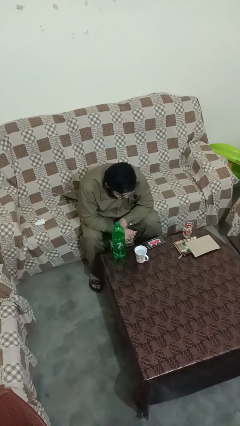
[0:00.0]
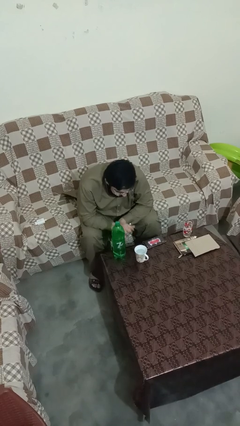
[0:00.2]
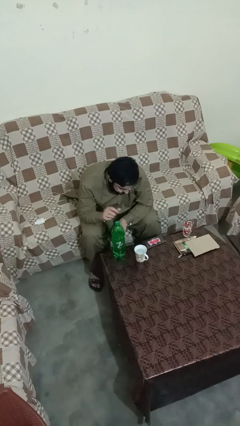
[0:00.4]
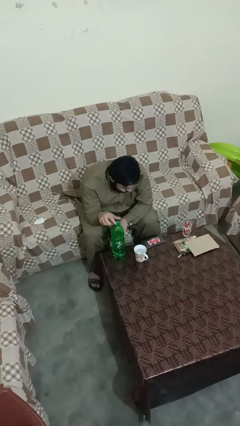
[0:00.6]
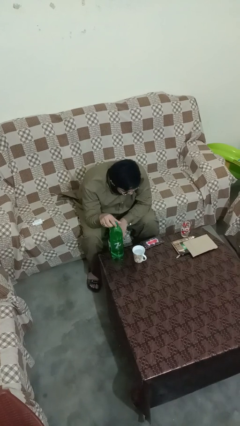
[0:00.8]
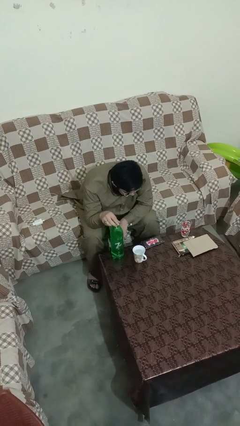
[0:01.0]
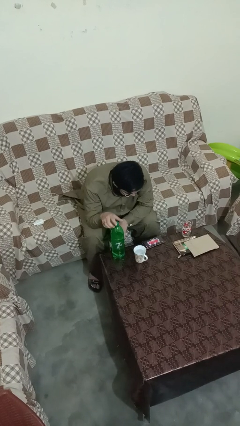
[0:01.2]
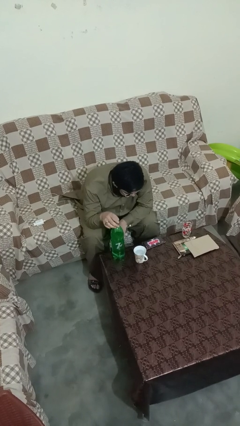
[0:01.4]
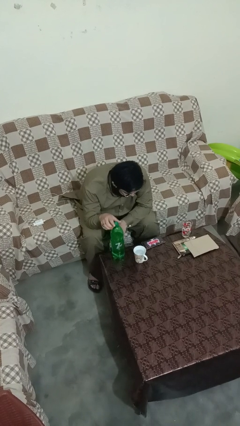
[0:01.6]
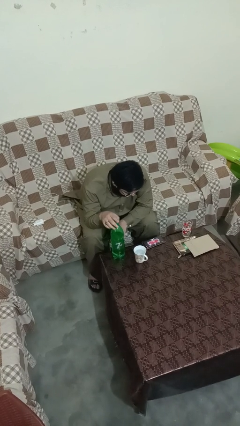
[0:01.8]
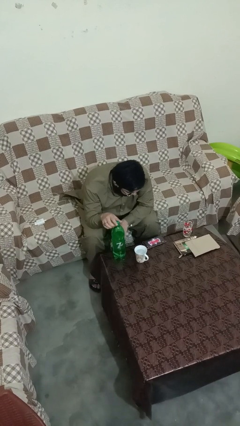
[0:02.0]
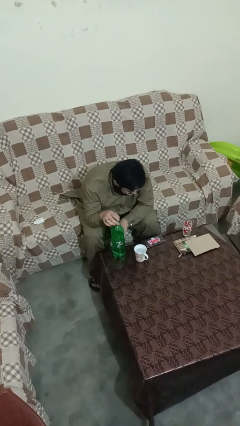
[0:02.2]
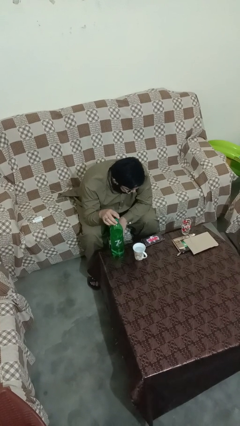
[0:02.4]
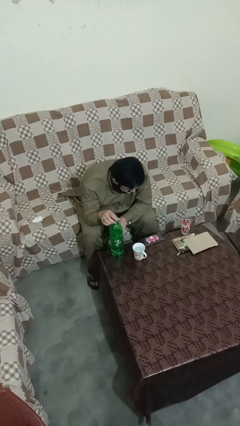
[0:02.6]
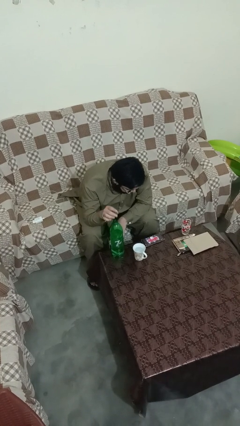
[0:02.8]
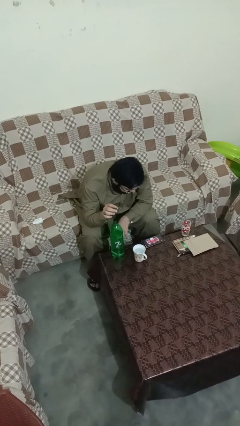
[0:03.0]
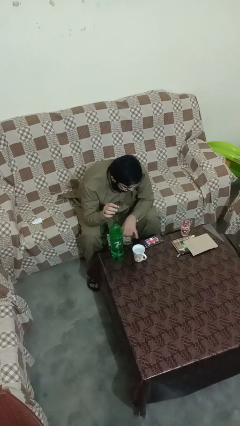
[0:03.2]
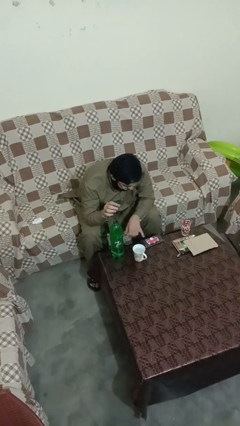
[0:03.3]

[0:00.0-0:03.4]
person unscrews lid from bottle

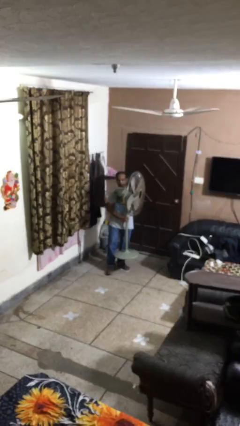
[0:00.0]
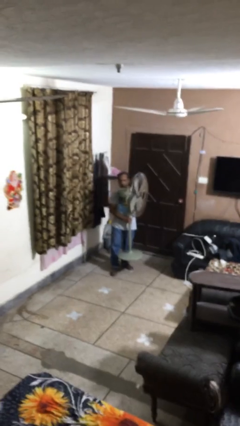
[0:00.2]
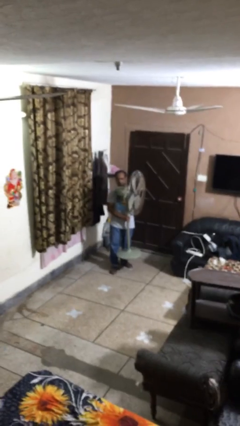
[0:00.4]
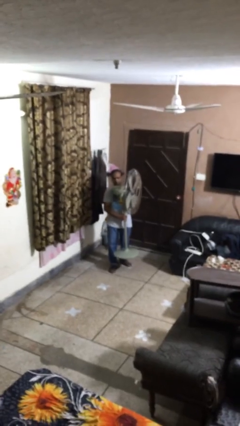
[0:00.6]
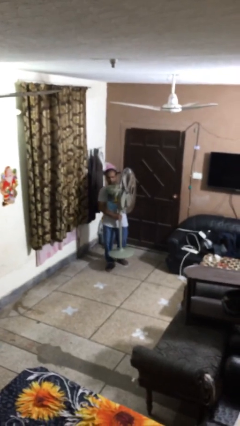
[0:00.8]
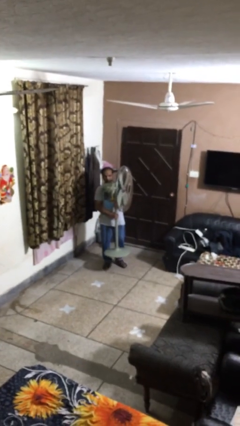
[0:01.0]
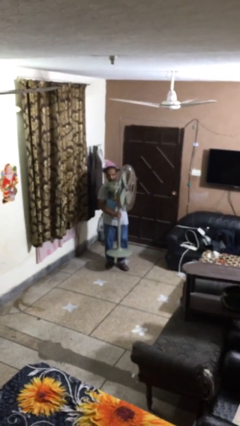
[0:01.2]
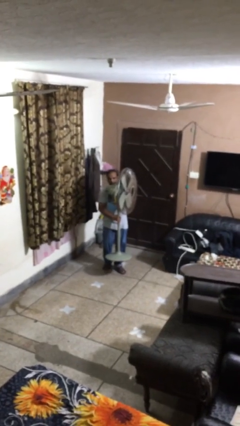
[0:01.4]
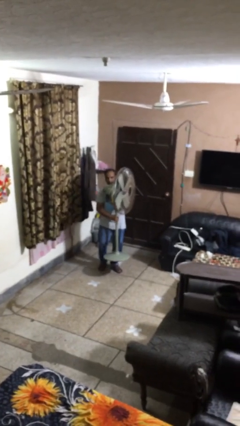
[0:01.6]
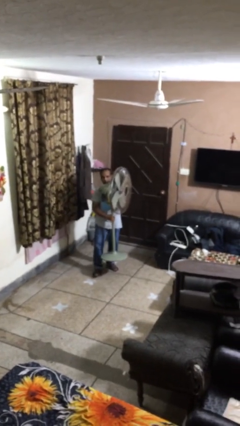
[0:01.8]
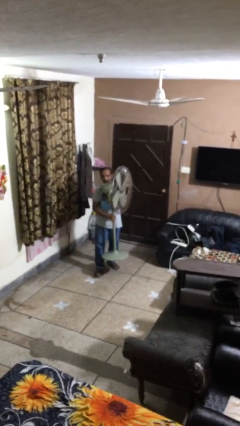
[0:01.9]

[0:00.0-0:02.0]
person carries heavy object

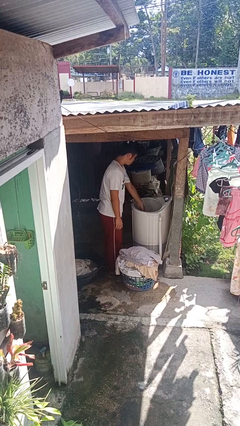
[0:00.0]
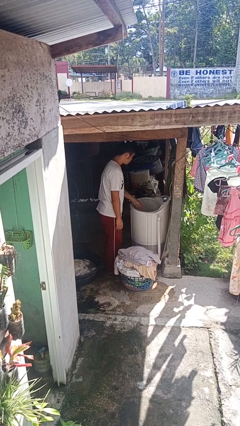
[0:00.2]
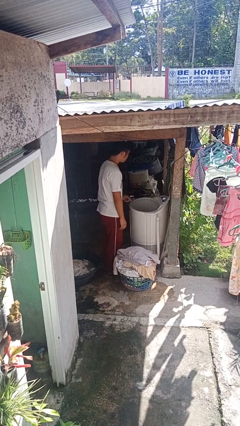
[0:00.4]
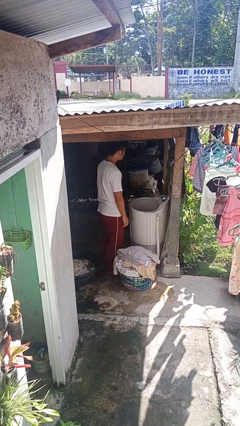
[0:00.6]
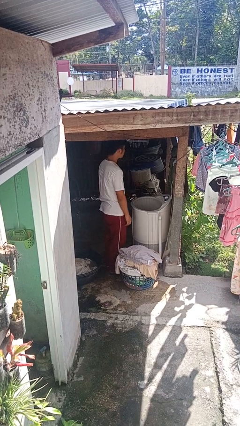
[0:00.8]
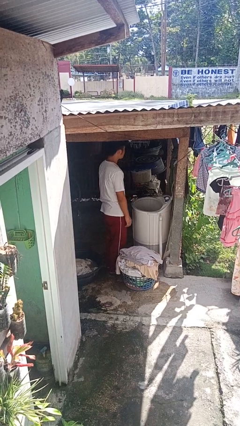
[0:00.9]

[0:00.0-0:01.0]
person loads clotheswasher

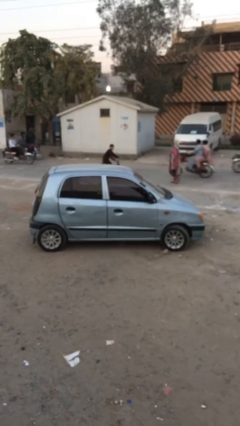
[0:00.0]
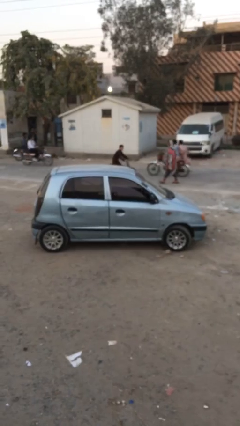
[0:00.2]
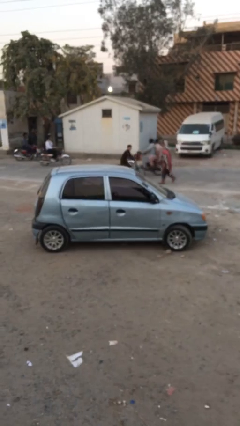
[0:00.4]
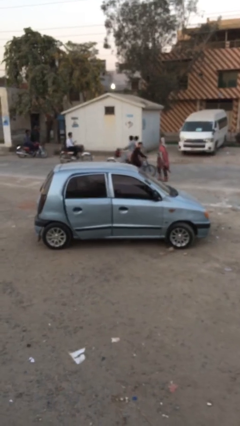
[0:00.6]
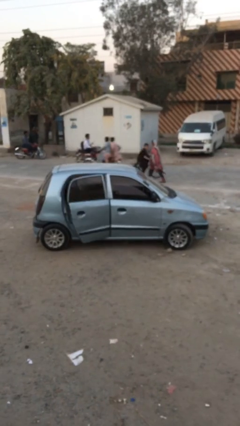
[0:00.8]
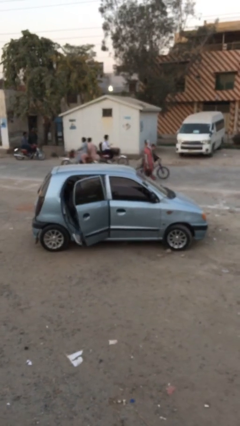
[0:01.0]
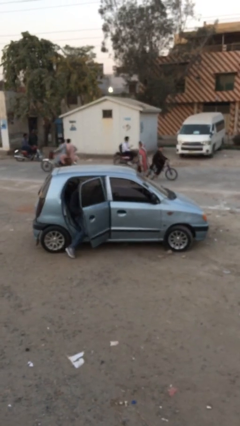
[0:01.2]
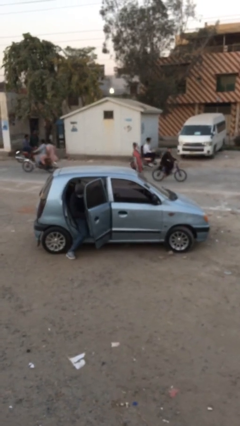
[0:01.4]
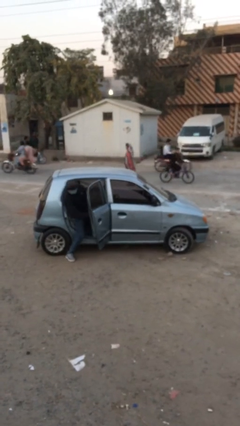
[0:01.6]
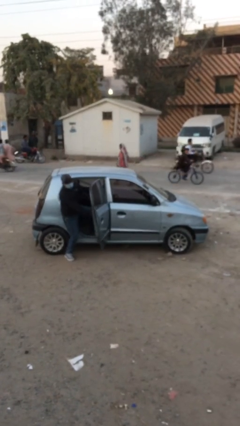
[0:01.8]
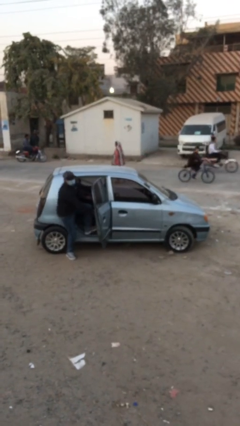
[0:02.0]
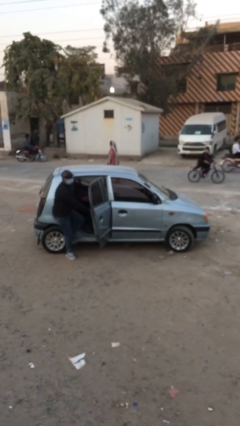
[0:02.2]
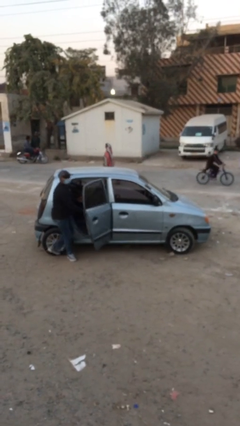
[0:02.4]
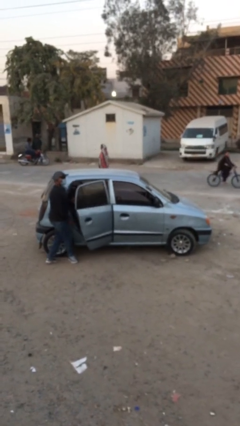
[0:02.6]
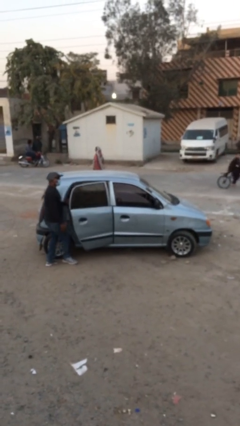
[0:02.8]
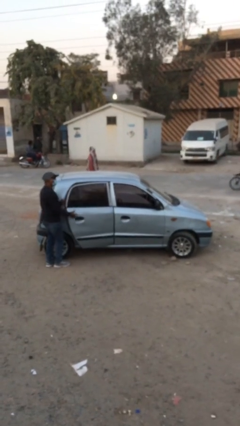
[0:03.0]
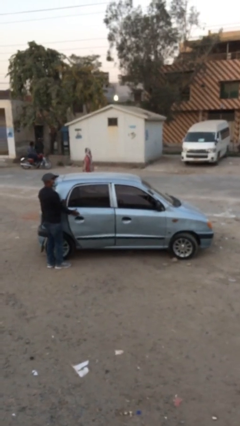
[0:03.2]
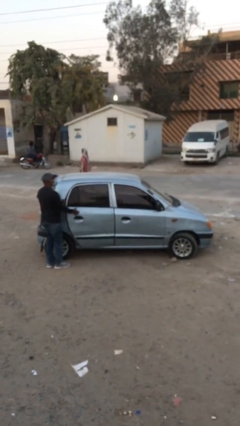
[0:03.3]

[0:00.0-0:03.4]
car drops off person

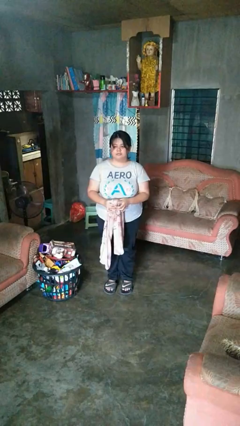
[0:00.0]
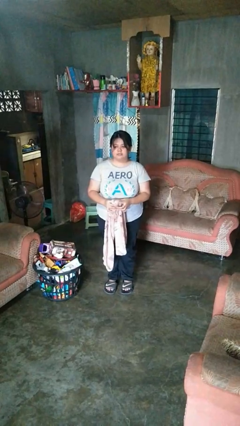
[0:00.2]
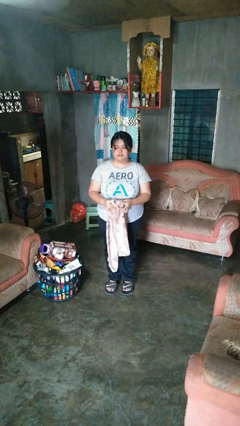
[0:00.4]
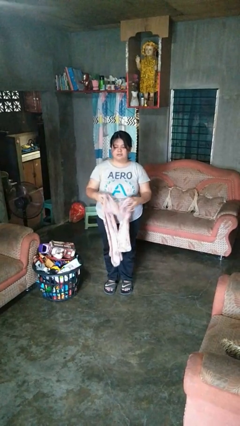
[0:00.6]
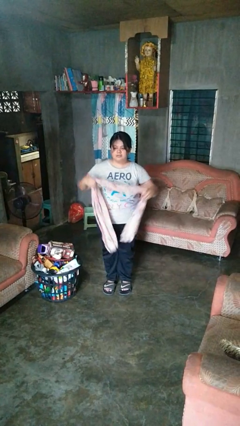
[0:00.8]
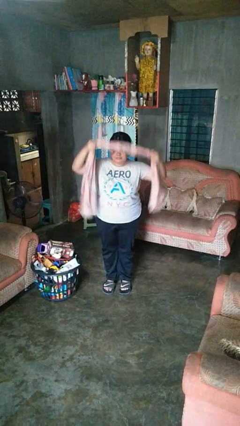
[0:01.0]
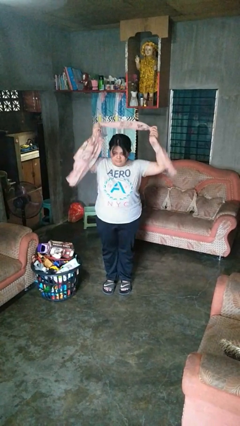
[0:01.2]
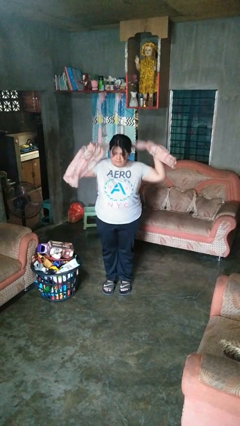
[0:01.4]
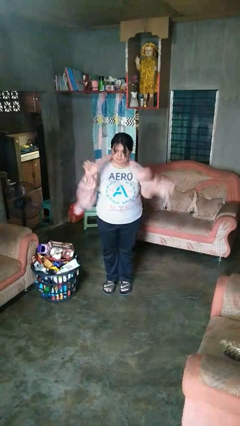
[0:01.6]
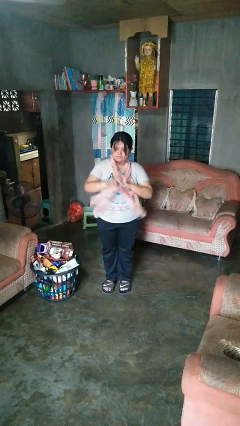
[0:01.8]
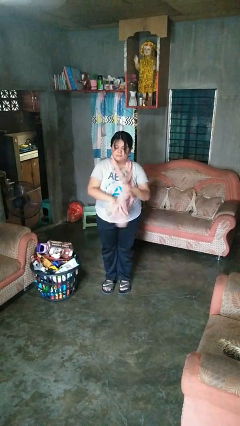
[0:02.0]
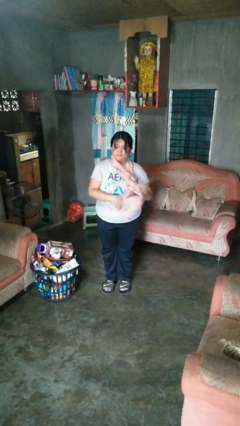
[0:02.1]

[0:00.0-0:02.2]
person puts on scarf

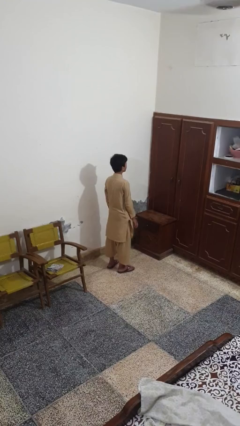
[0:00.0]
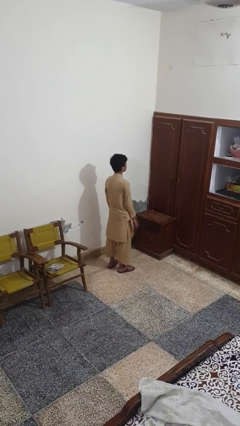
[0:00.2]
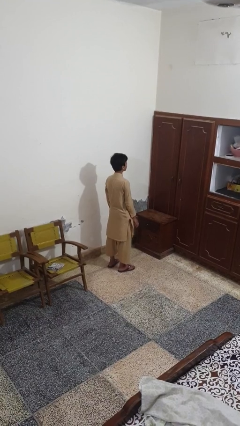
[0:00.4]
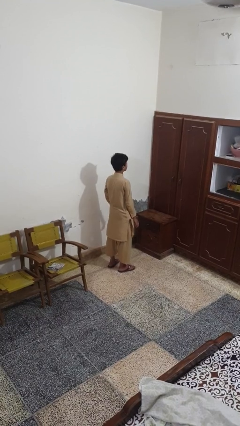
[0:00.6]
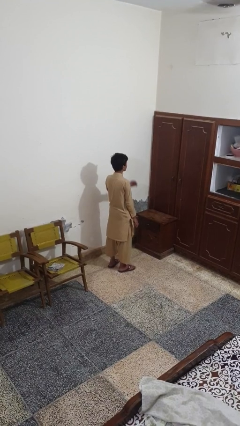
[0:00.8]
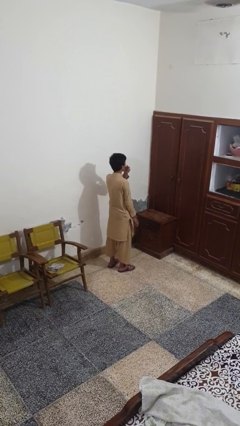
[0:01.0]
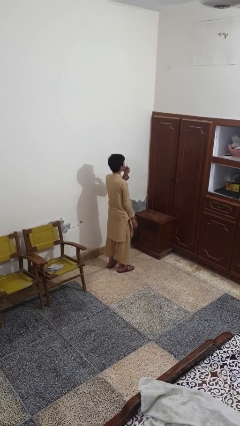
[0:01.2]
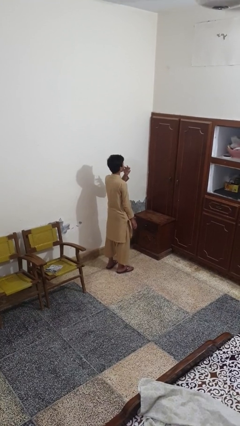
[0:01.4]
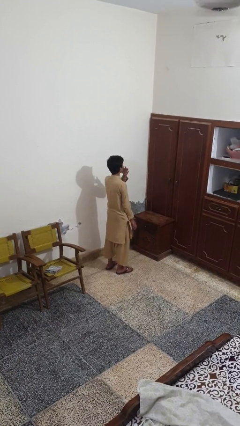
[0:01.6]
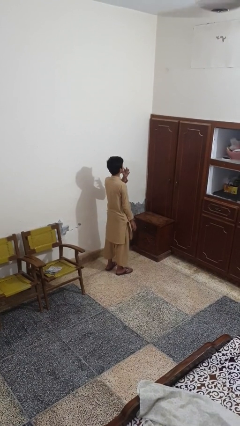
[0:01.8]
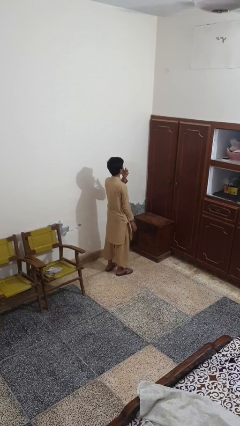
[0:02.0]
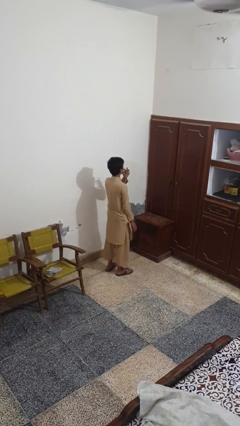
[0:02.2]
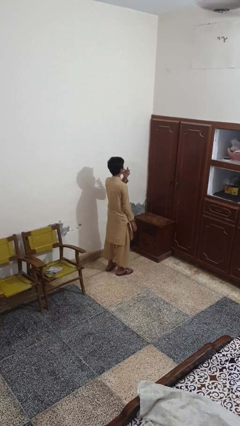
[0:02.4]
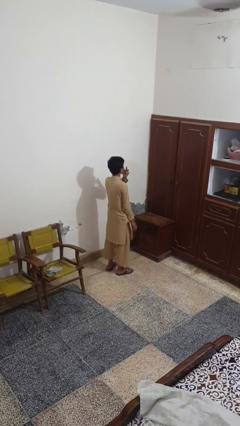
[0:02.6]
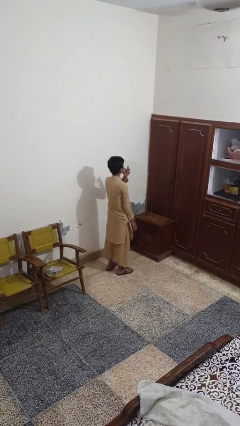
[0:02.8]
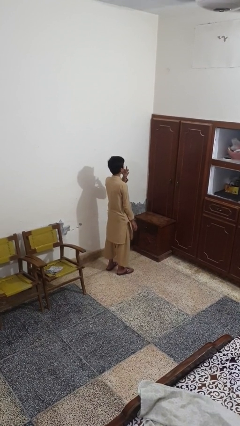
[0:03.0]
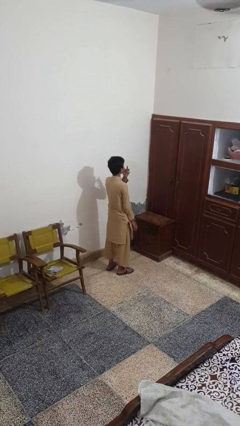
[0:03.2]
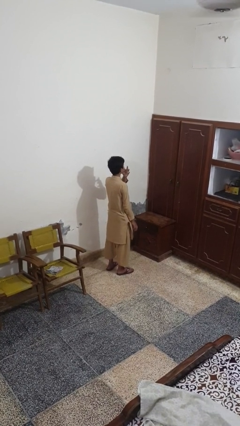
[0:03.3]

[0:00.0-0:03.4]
person licks fingers

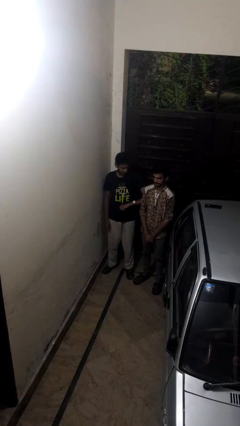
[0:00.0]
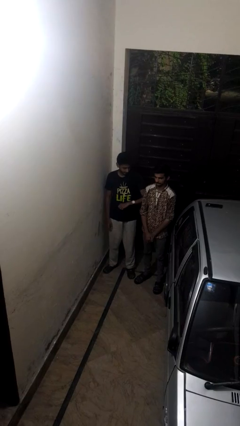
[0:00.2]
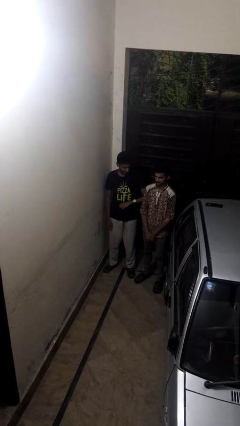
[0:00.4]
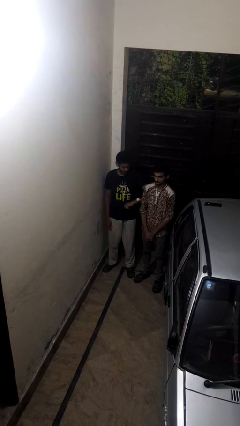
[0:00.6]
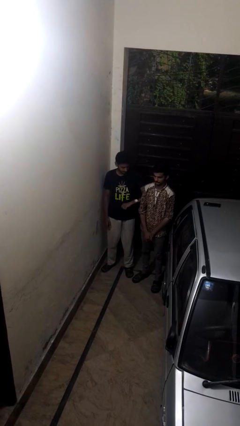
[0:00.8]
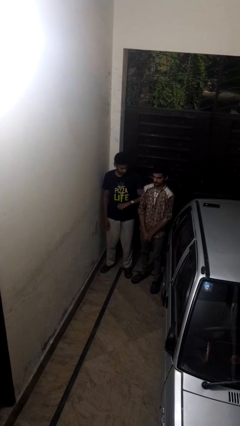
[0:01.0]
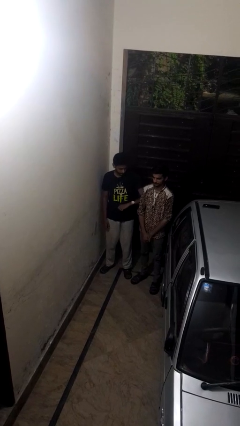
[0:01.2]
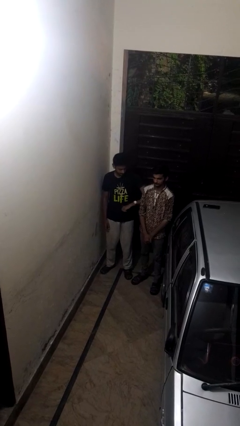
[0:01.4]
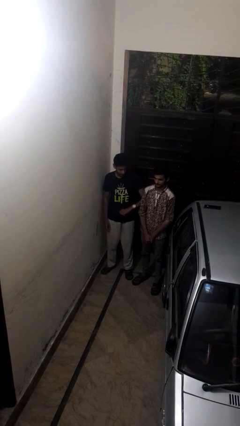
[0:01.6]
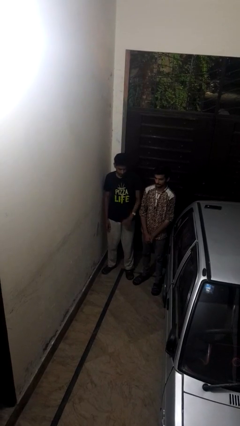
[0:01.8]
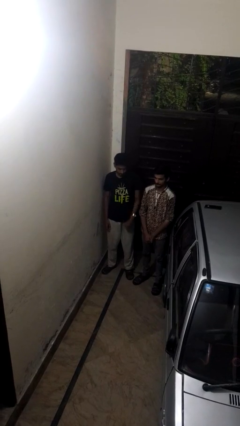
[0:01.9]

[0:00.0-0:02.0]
person nudges person with elbow
